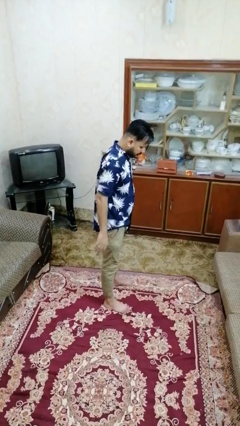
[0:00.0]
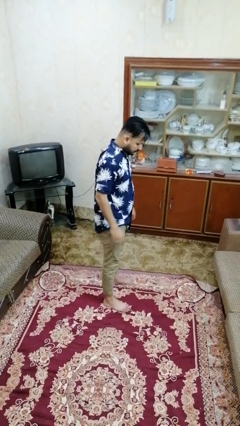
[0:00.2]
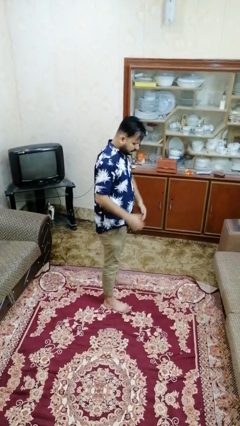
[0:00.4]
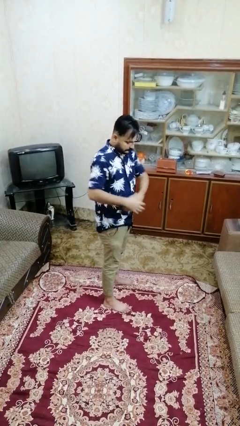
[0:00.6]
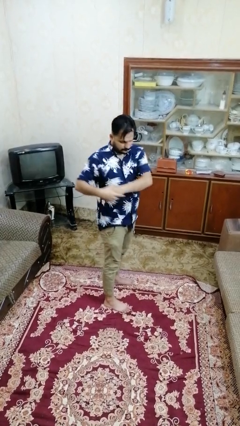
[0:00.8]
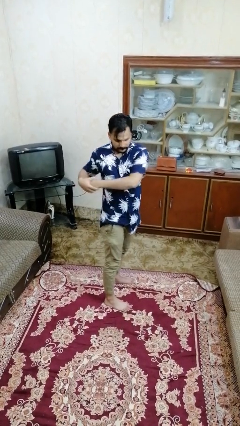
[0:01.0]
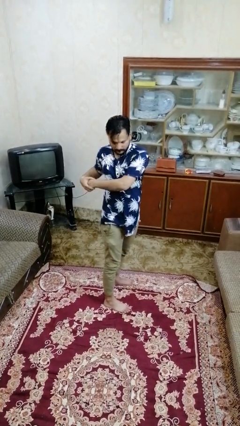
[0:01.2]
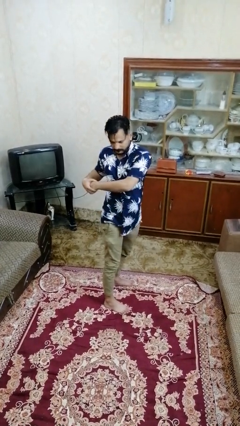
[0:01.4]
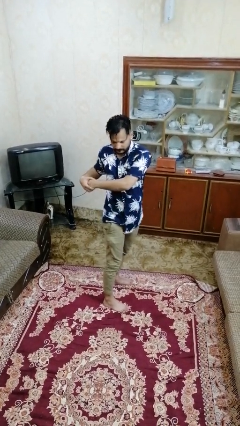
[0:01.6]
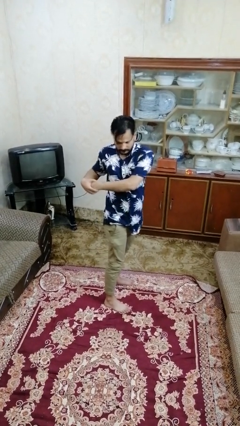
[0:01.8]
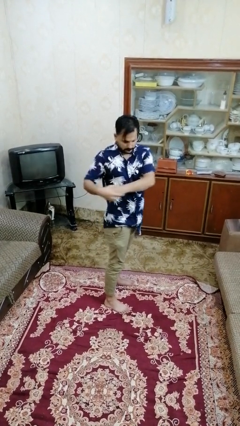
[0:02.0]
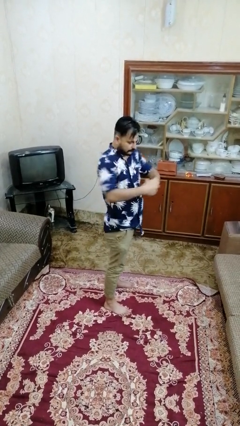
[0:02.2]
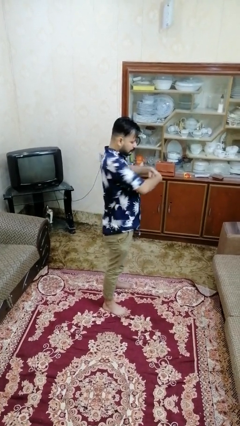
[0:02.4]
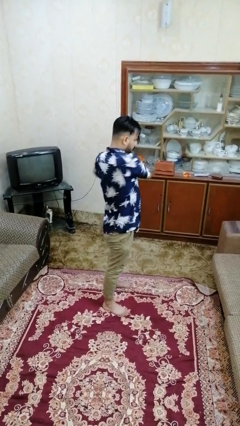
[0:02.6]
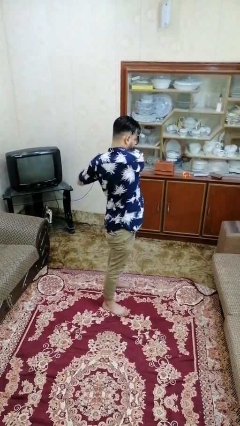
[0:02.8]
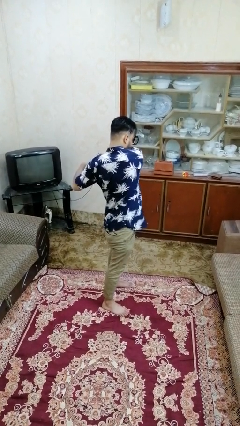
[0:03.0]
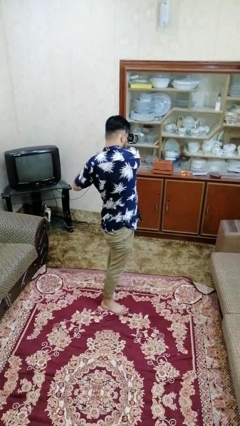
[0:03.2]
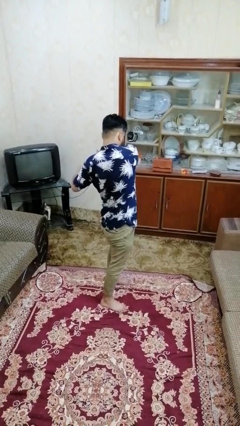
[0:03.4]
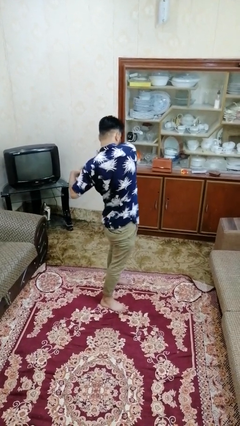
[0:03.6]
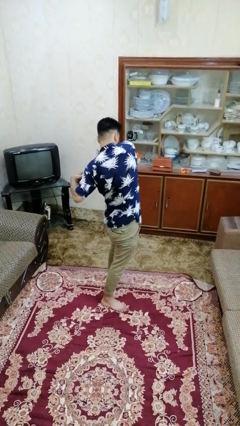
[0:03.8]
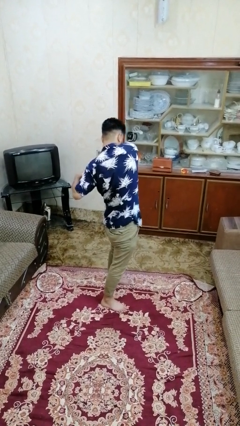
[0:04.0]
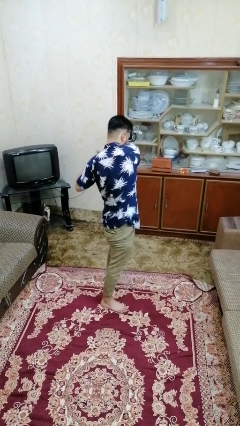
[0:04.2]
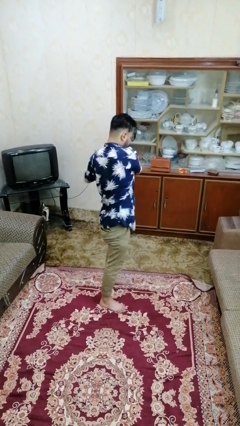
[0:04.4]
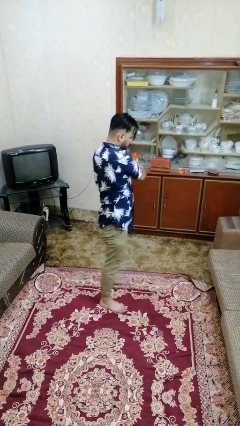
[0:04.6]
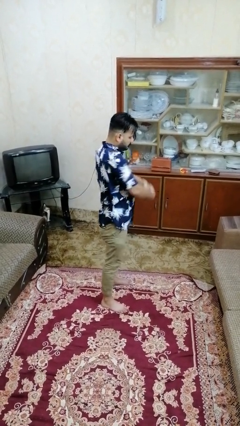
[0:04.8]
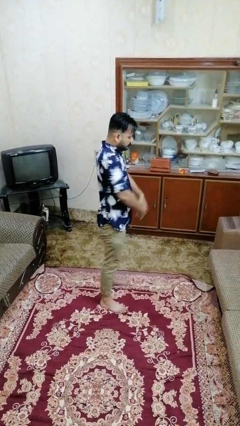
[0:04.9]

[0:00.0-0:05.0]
person stretches arms to side

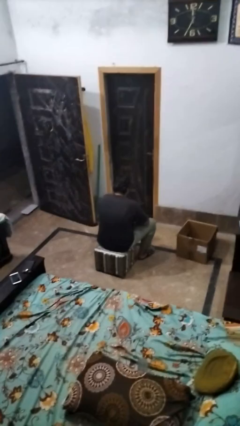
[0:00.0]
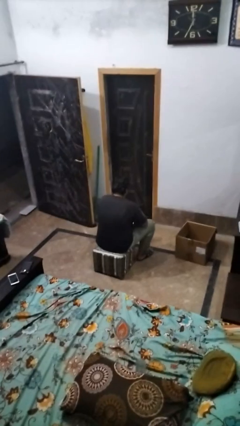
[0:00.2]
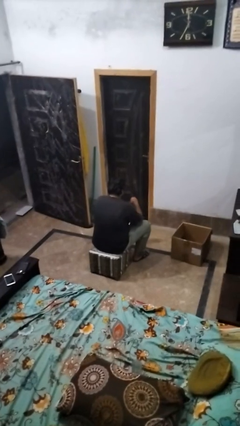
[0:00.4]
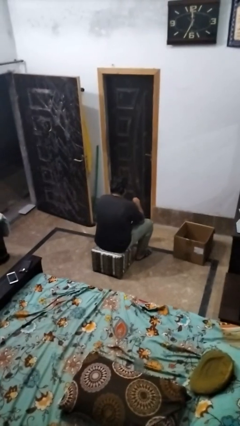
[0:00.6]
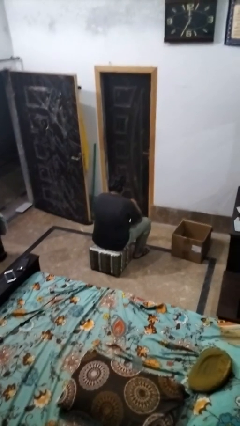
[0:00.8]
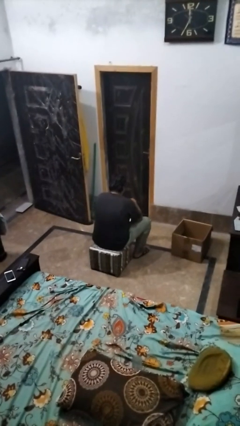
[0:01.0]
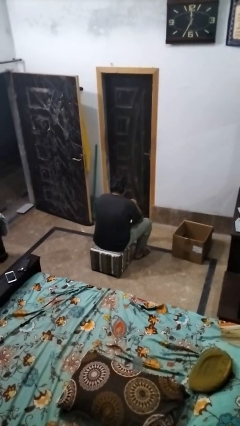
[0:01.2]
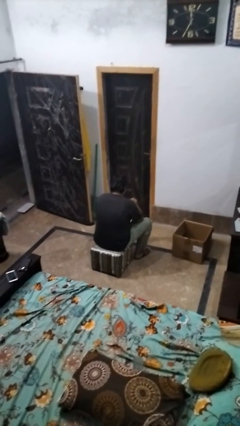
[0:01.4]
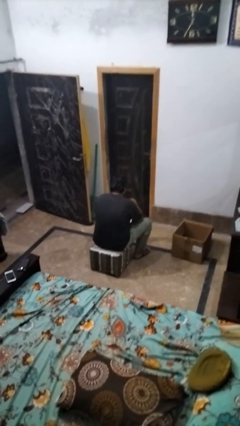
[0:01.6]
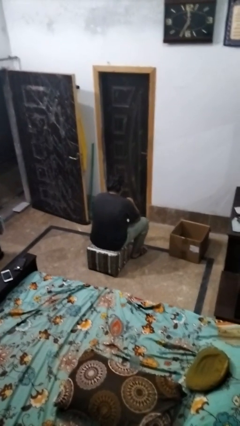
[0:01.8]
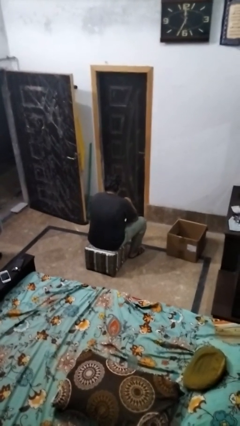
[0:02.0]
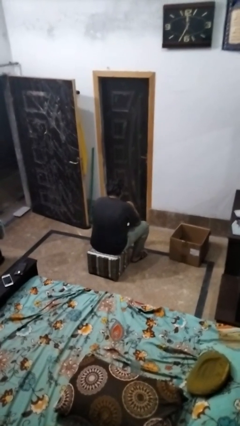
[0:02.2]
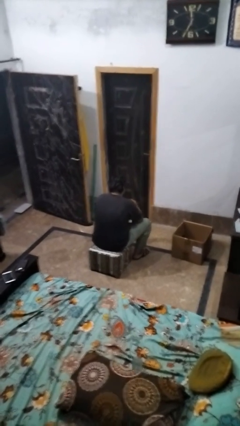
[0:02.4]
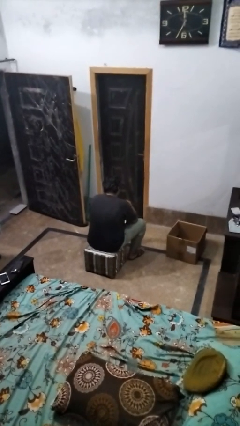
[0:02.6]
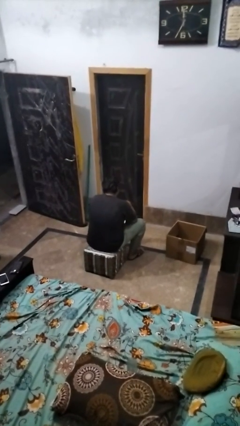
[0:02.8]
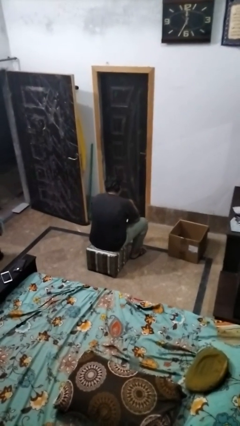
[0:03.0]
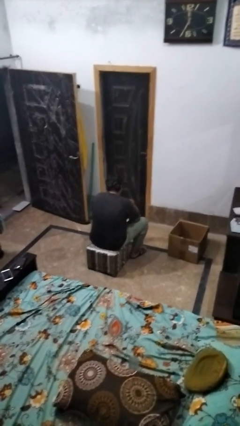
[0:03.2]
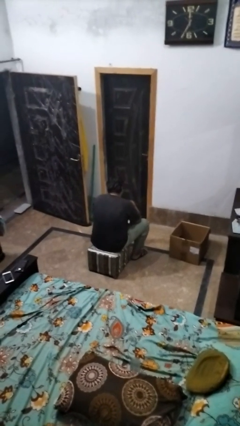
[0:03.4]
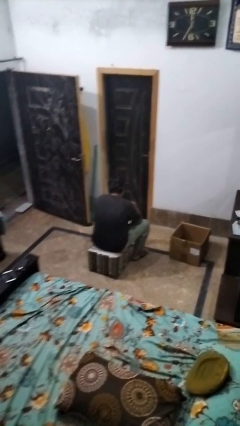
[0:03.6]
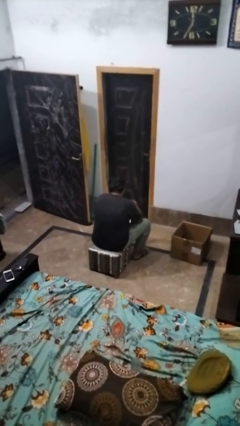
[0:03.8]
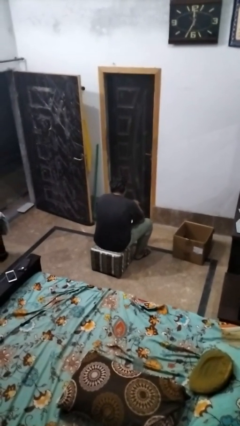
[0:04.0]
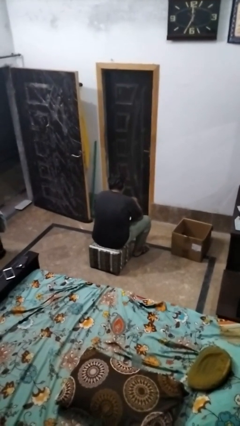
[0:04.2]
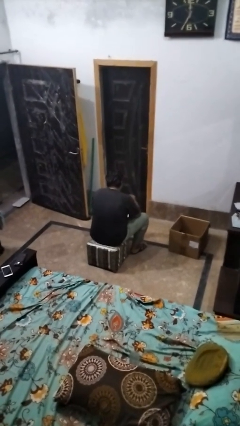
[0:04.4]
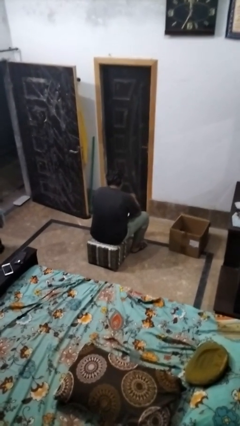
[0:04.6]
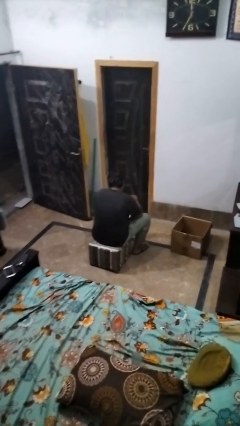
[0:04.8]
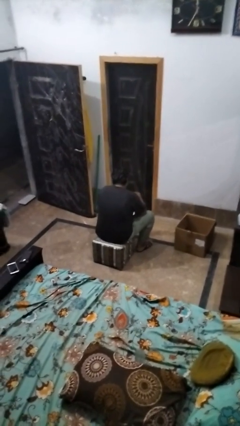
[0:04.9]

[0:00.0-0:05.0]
person stirs mug

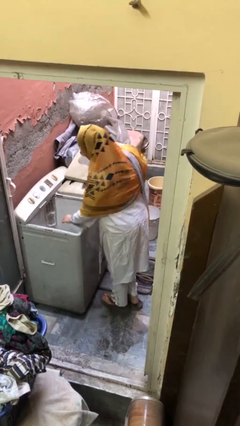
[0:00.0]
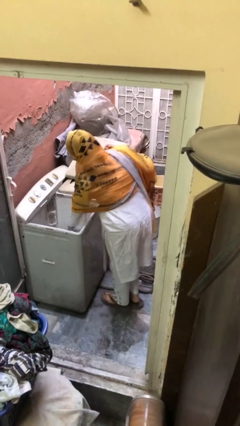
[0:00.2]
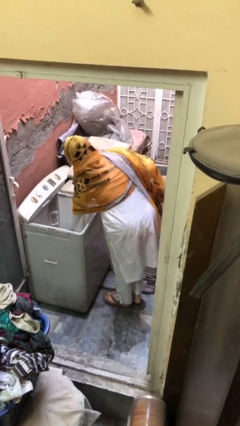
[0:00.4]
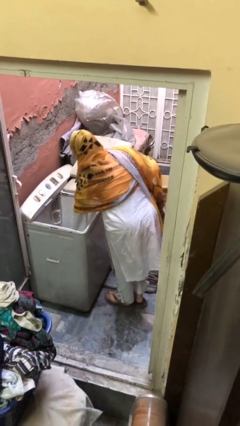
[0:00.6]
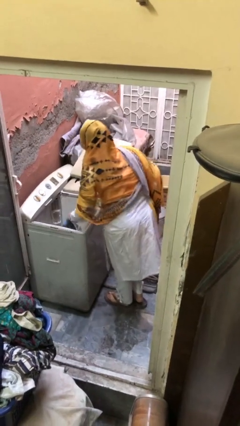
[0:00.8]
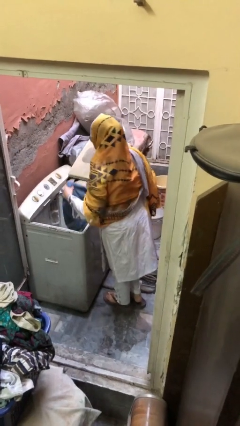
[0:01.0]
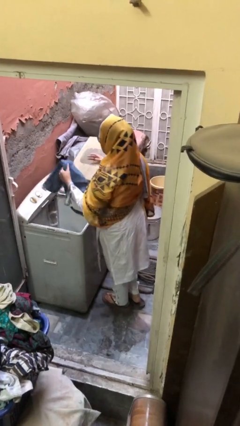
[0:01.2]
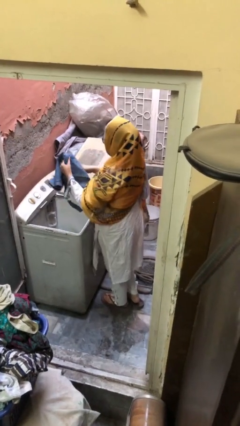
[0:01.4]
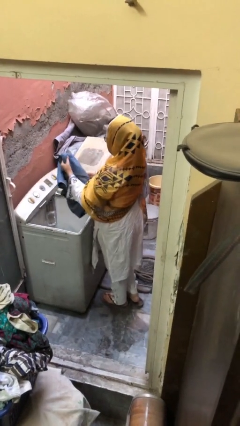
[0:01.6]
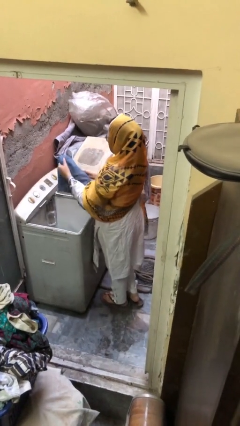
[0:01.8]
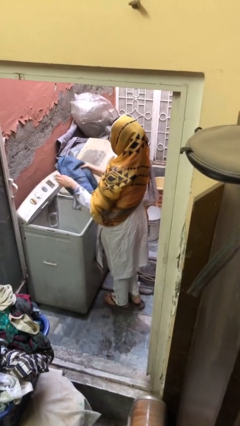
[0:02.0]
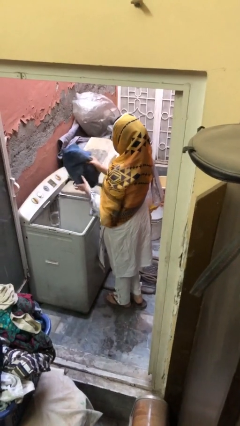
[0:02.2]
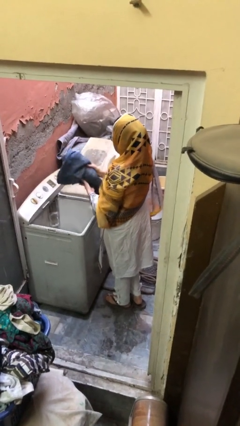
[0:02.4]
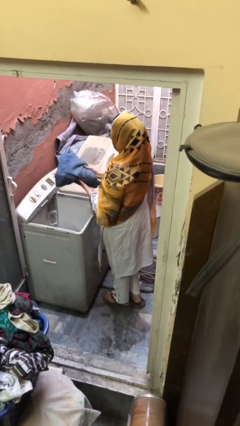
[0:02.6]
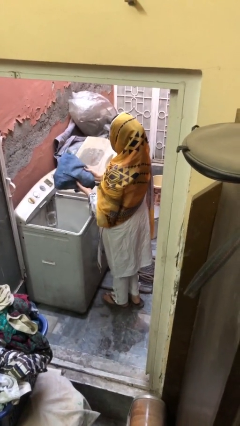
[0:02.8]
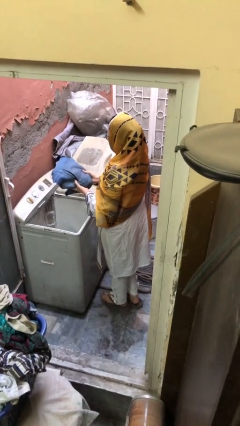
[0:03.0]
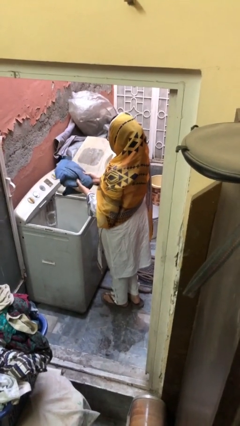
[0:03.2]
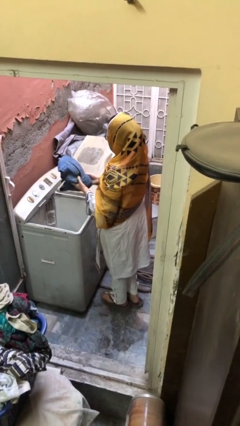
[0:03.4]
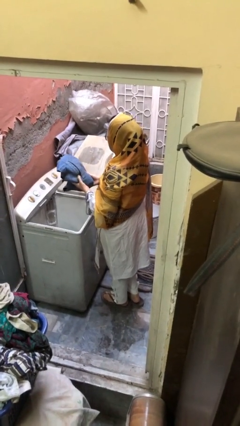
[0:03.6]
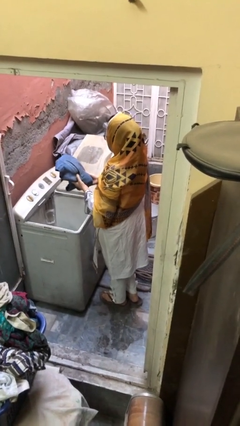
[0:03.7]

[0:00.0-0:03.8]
person unloads clotheswasher

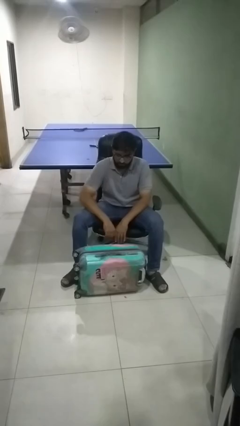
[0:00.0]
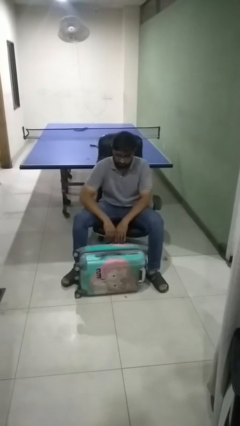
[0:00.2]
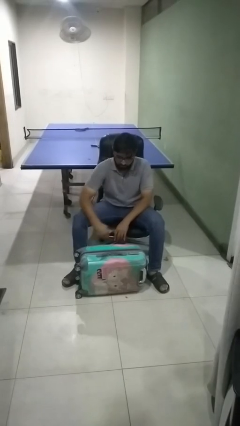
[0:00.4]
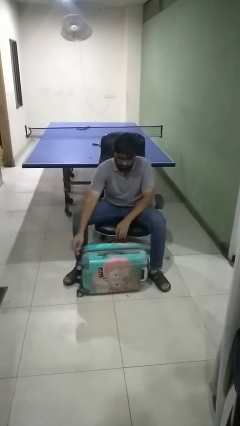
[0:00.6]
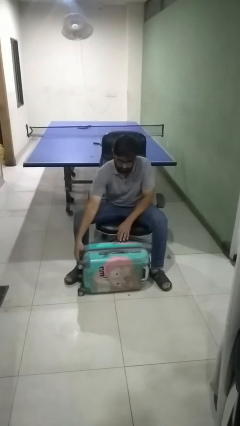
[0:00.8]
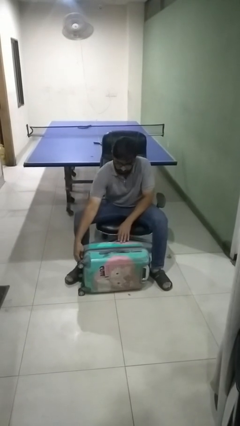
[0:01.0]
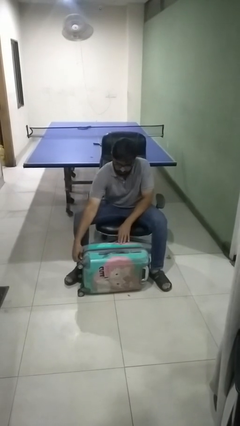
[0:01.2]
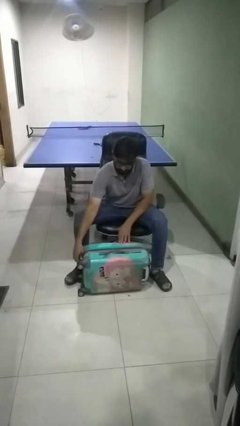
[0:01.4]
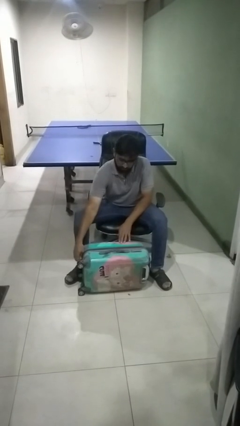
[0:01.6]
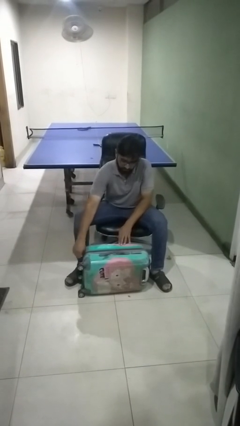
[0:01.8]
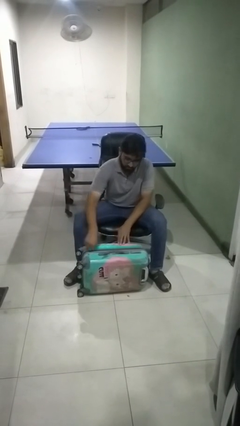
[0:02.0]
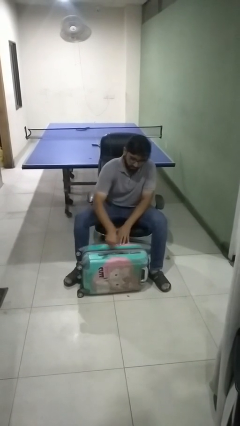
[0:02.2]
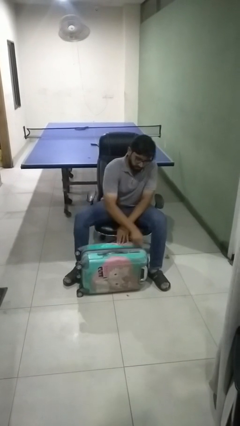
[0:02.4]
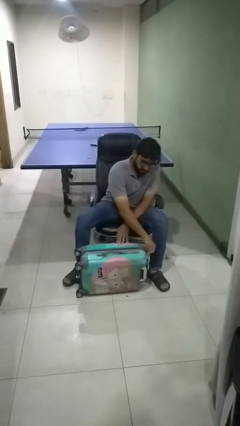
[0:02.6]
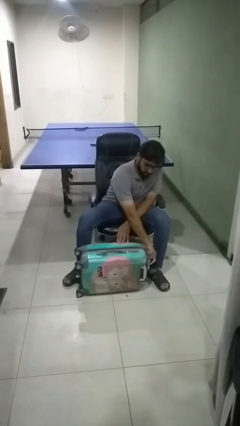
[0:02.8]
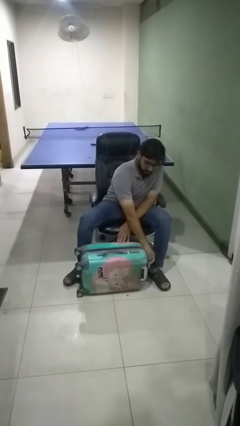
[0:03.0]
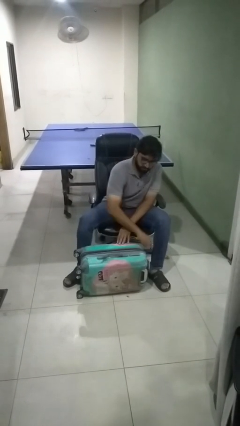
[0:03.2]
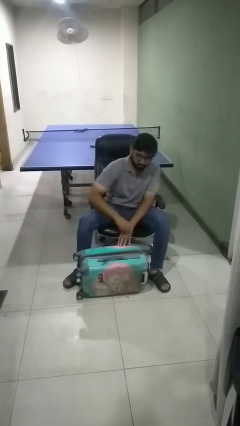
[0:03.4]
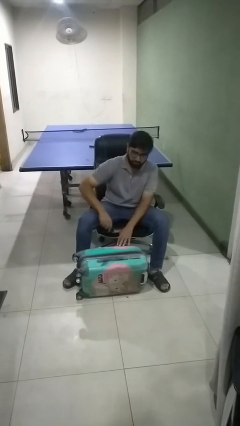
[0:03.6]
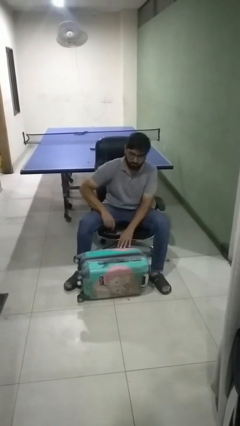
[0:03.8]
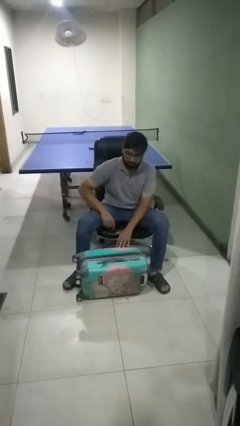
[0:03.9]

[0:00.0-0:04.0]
person opens suitcase
